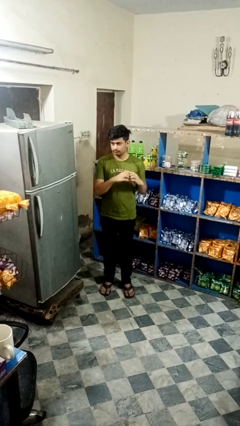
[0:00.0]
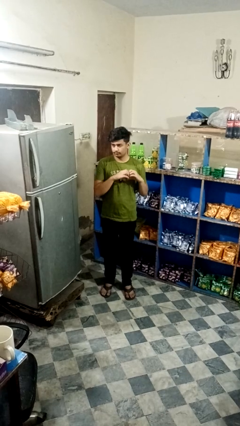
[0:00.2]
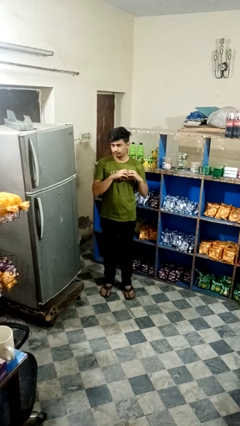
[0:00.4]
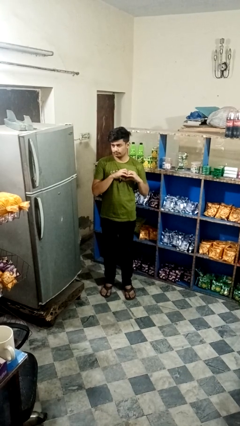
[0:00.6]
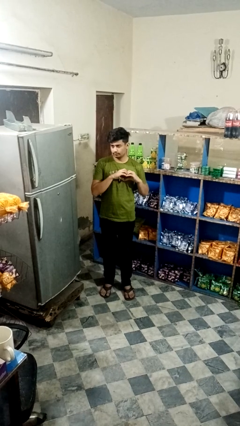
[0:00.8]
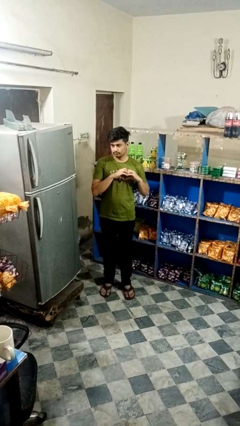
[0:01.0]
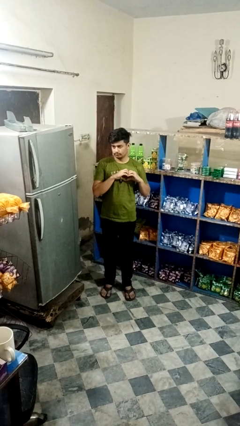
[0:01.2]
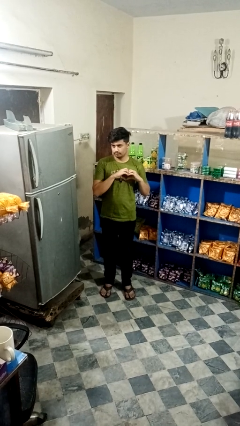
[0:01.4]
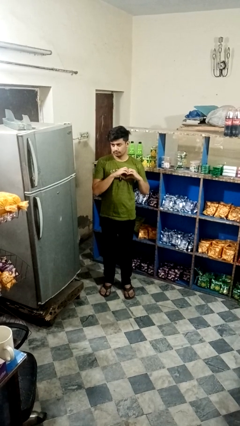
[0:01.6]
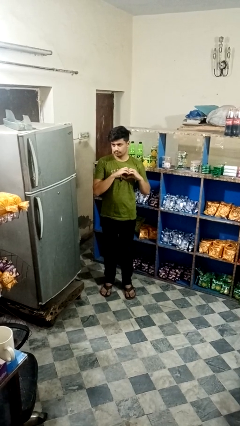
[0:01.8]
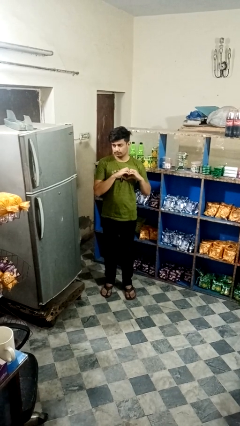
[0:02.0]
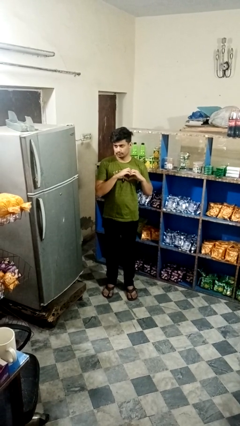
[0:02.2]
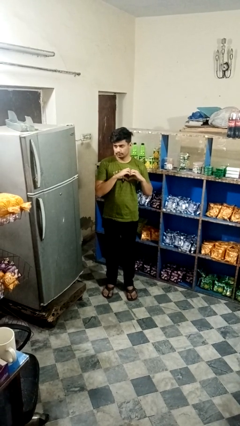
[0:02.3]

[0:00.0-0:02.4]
person gestures heart

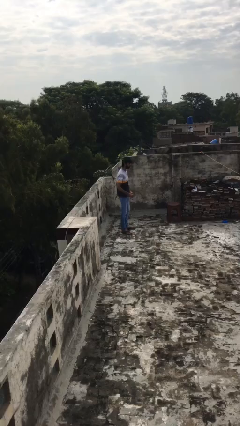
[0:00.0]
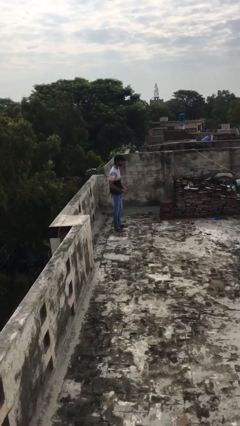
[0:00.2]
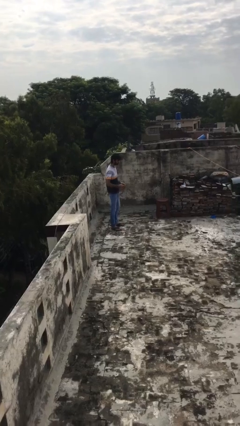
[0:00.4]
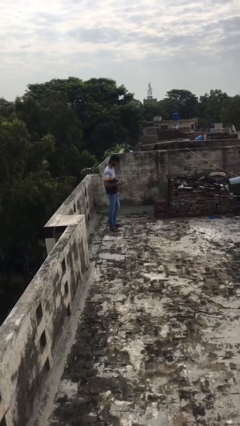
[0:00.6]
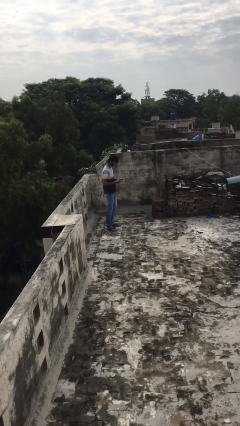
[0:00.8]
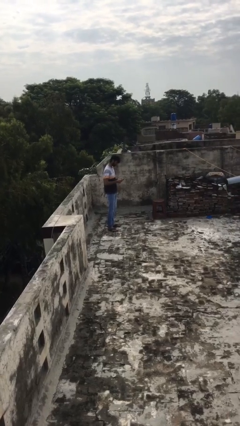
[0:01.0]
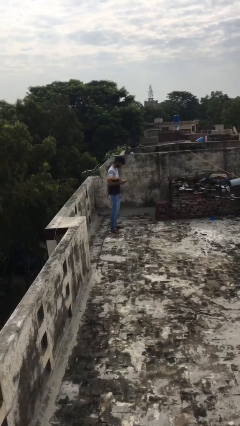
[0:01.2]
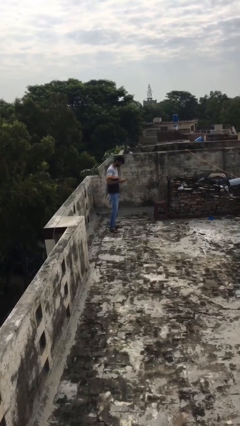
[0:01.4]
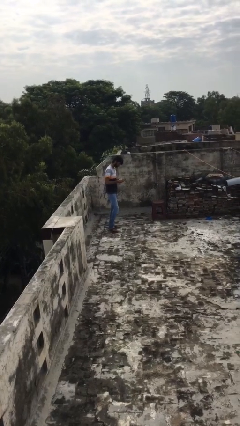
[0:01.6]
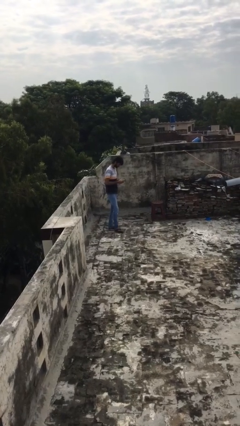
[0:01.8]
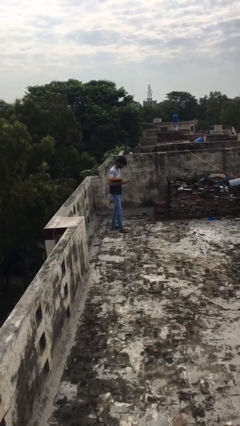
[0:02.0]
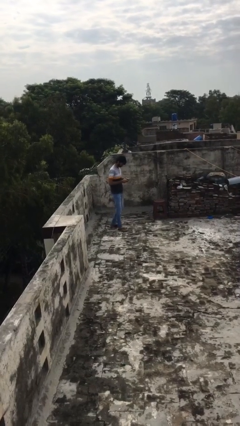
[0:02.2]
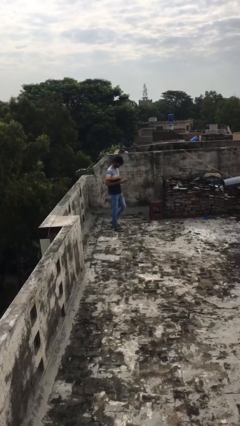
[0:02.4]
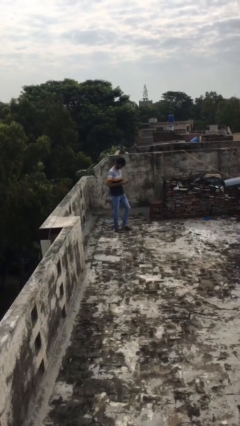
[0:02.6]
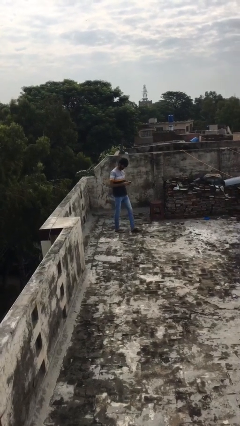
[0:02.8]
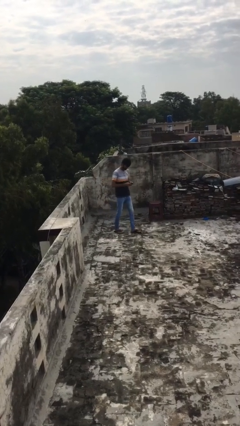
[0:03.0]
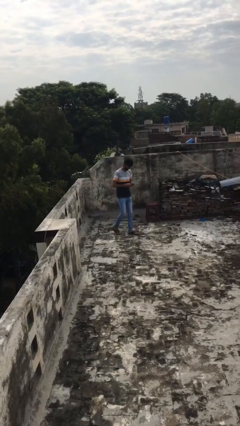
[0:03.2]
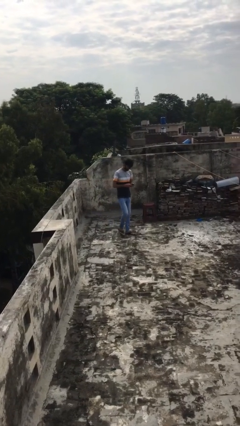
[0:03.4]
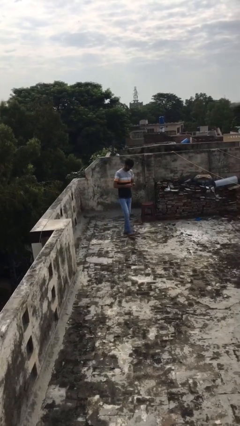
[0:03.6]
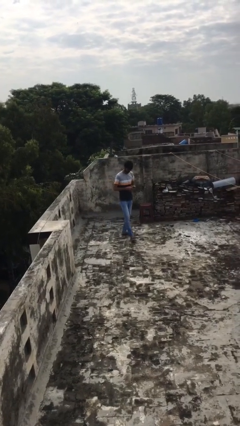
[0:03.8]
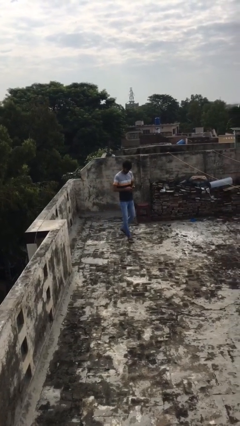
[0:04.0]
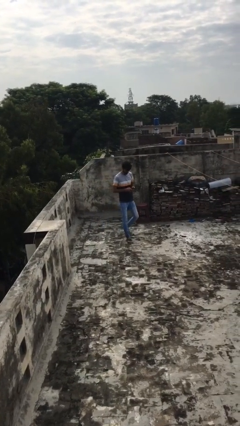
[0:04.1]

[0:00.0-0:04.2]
person texts on phone

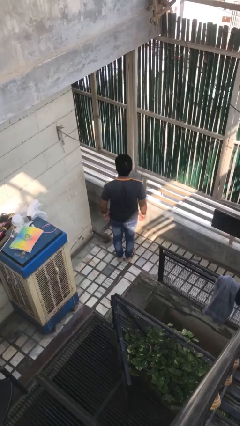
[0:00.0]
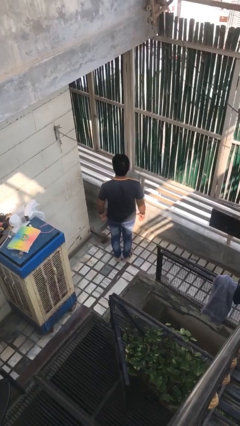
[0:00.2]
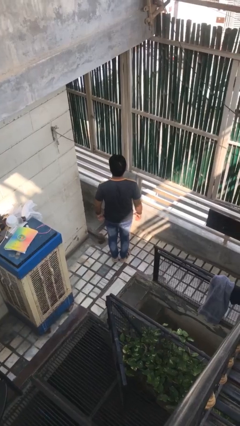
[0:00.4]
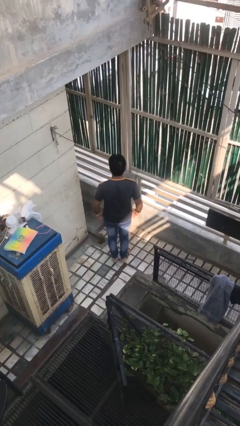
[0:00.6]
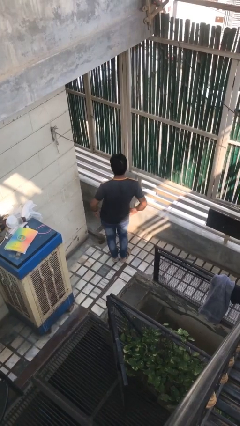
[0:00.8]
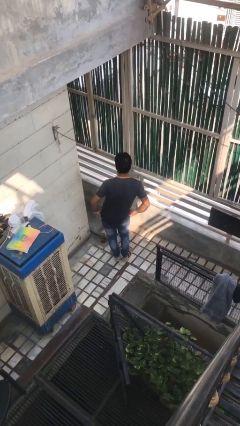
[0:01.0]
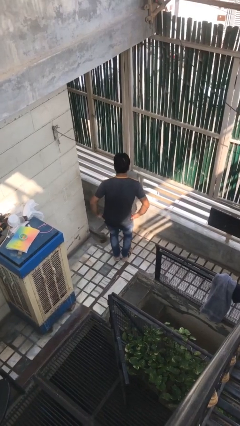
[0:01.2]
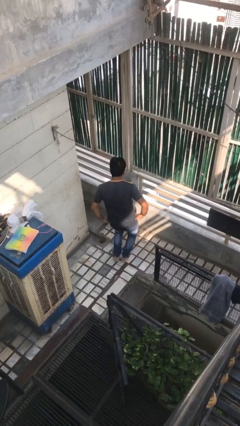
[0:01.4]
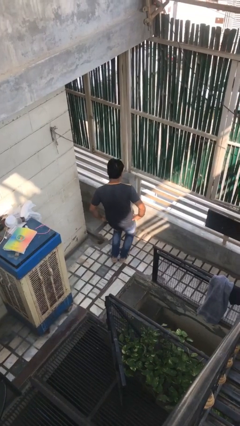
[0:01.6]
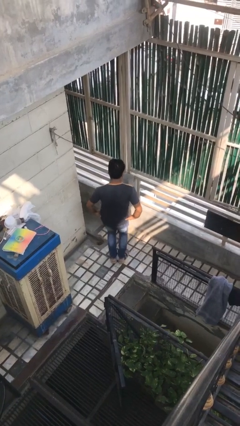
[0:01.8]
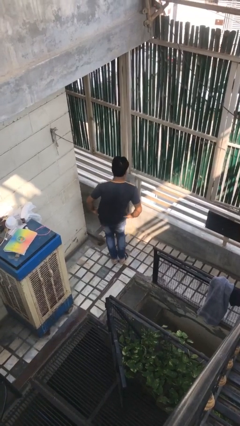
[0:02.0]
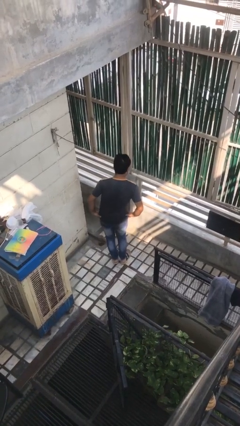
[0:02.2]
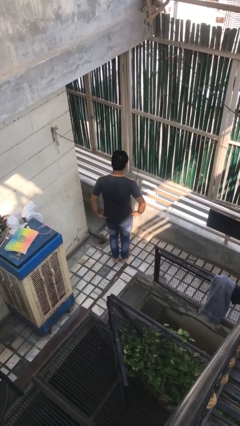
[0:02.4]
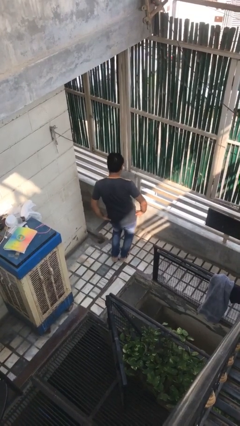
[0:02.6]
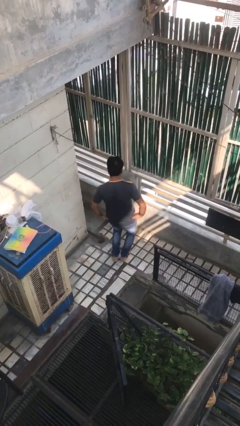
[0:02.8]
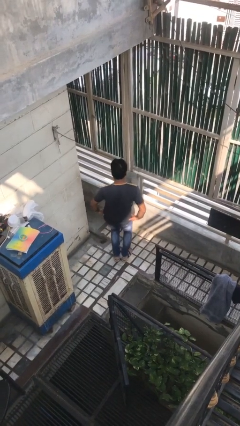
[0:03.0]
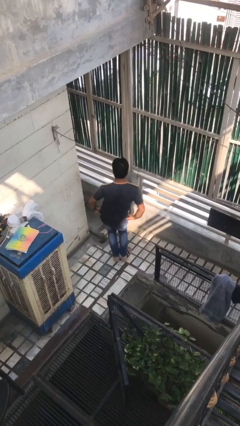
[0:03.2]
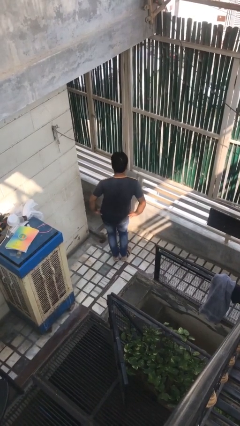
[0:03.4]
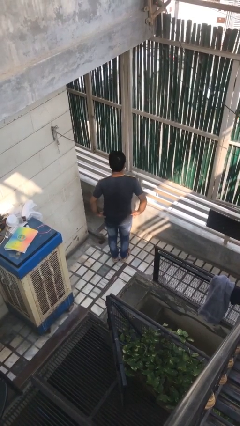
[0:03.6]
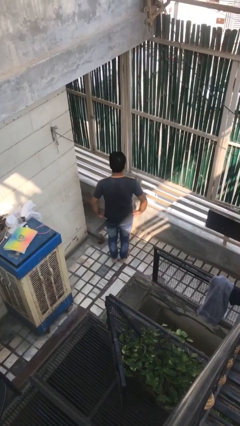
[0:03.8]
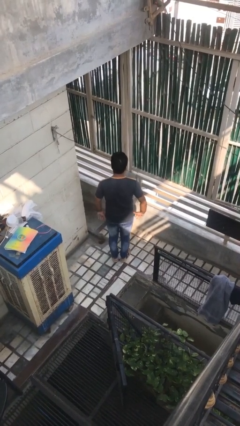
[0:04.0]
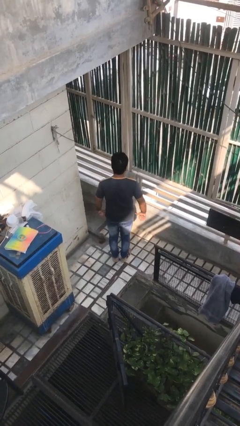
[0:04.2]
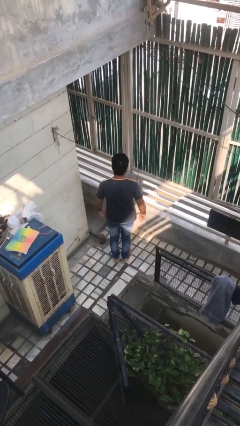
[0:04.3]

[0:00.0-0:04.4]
person wiggles hips

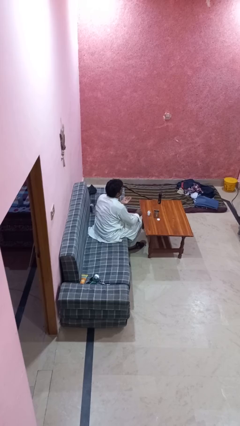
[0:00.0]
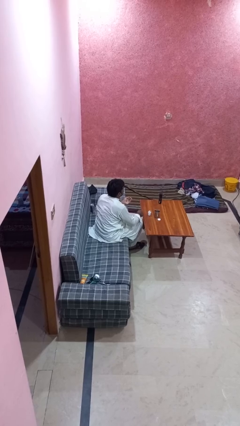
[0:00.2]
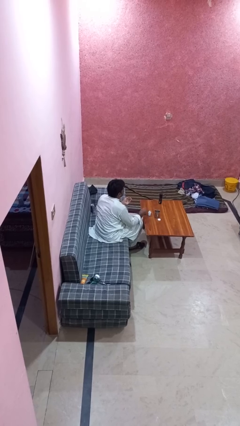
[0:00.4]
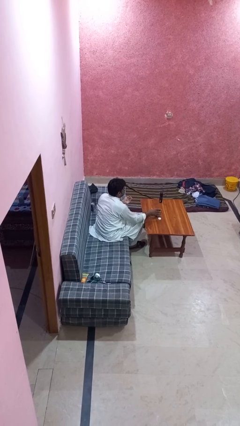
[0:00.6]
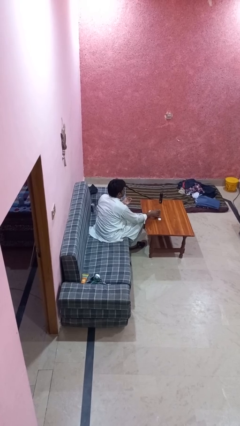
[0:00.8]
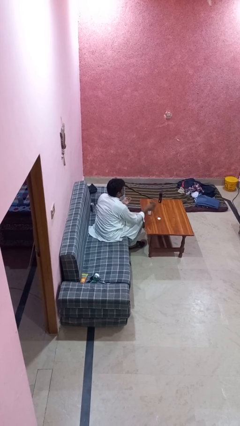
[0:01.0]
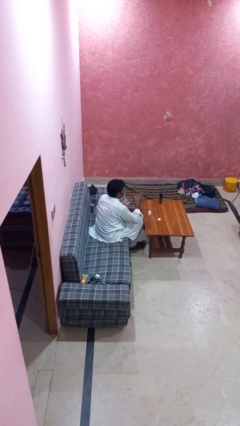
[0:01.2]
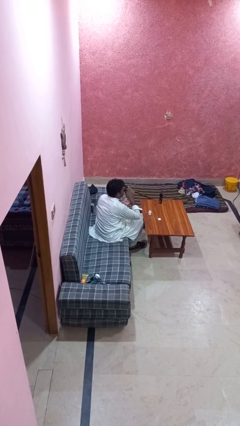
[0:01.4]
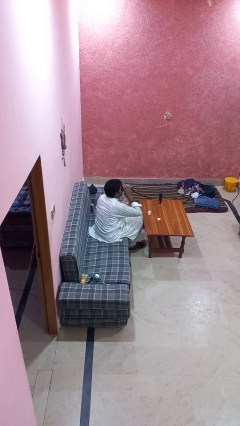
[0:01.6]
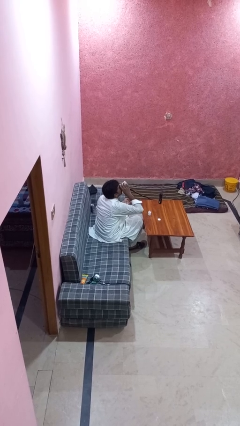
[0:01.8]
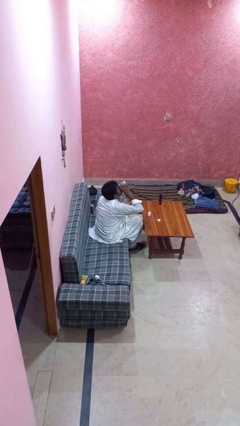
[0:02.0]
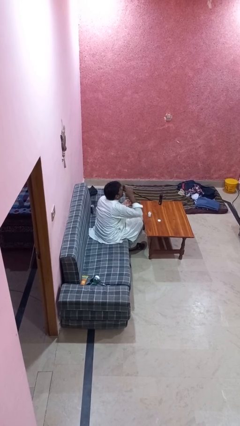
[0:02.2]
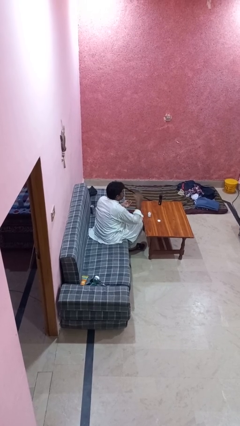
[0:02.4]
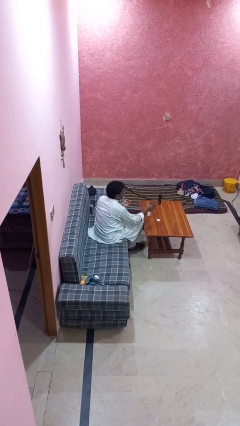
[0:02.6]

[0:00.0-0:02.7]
person drinks from cup

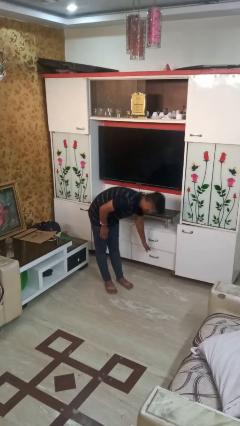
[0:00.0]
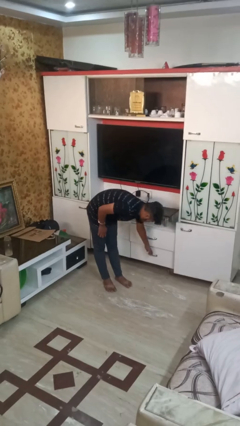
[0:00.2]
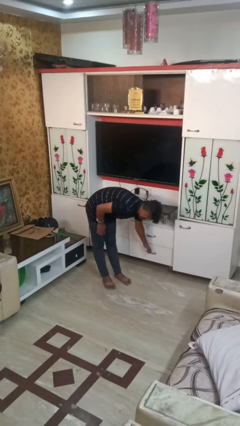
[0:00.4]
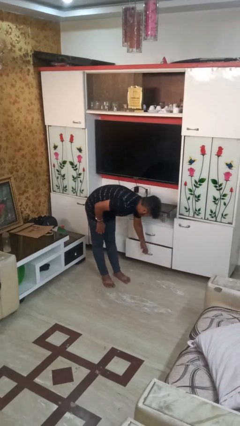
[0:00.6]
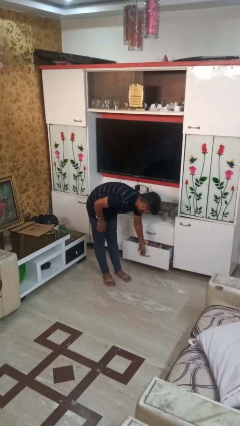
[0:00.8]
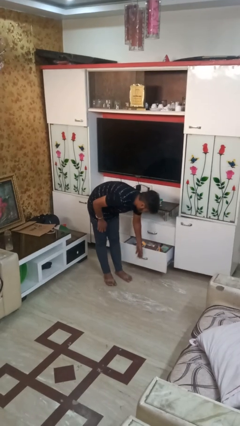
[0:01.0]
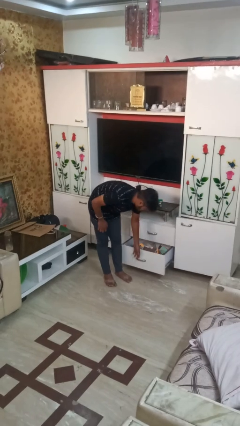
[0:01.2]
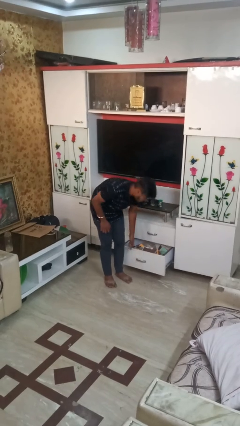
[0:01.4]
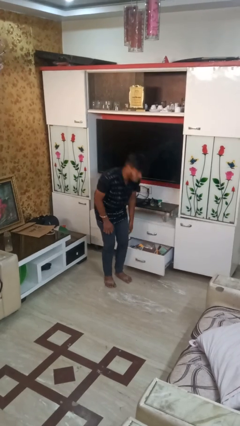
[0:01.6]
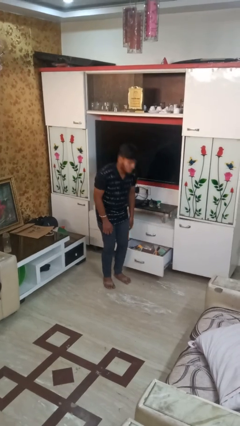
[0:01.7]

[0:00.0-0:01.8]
person opens dresser drawer

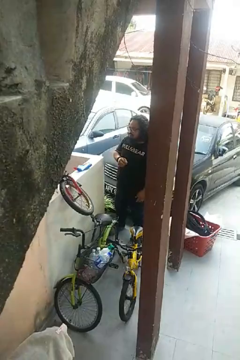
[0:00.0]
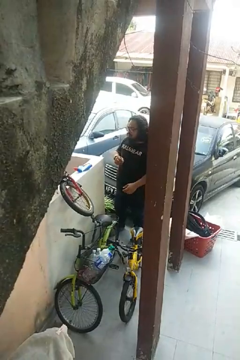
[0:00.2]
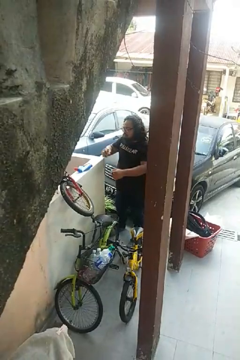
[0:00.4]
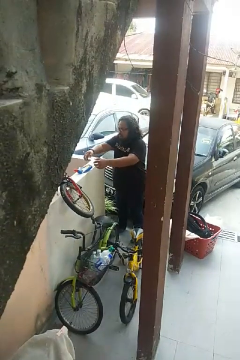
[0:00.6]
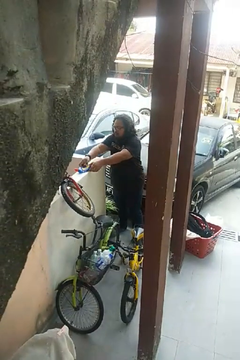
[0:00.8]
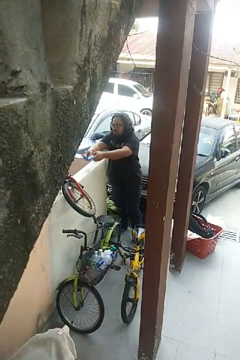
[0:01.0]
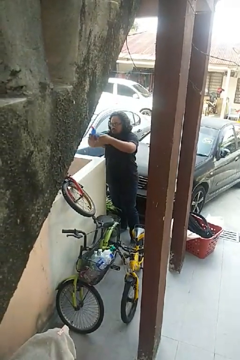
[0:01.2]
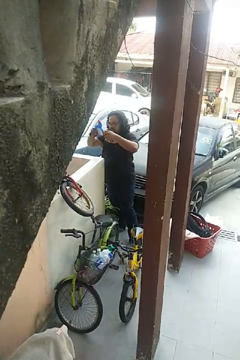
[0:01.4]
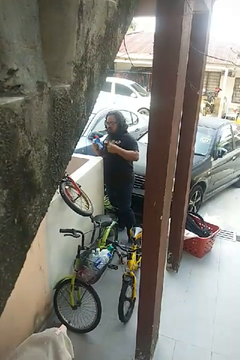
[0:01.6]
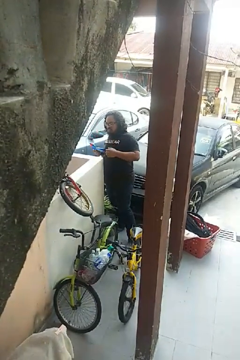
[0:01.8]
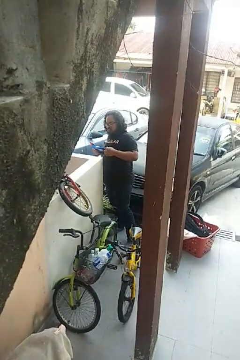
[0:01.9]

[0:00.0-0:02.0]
person picks up object from countertop

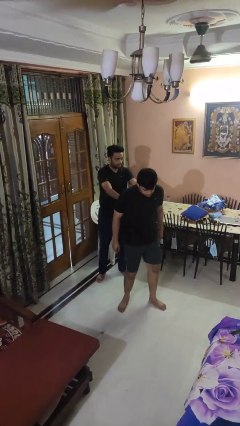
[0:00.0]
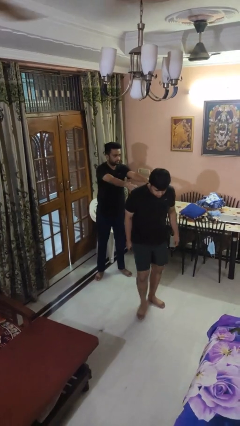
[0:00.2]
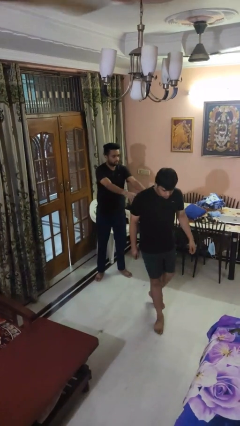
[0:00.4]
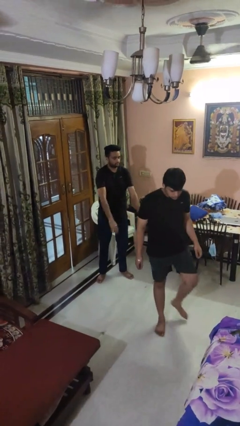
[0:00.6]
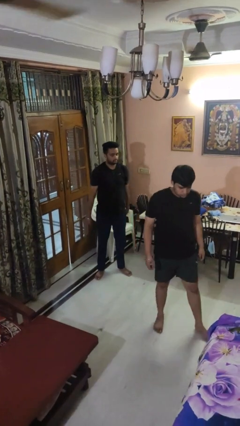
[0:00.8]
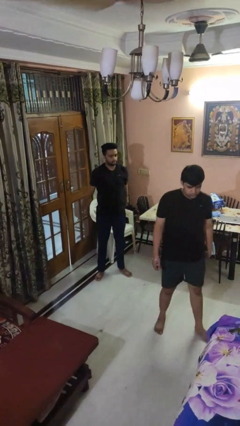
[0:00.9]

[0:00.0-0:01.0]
person shoves person
